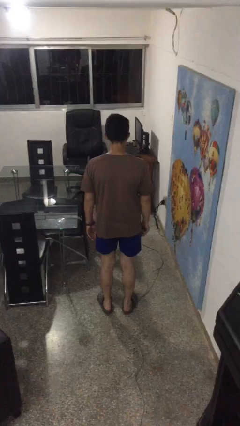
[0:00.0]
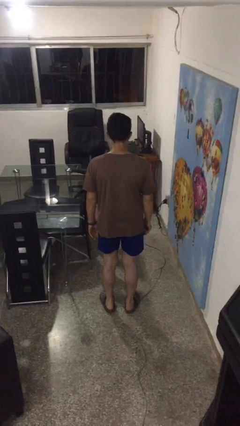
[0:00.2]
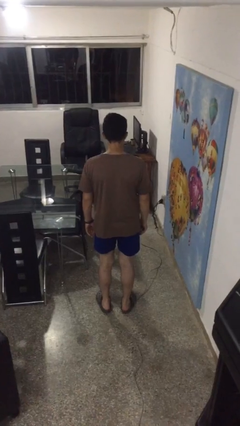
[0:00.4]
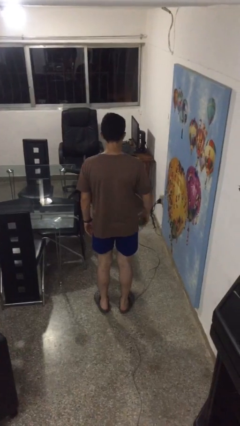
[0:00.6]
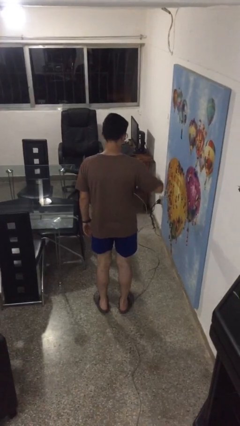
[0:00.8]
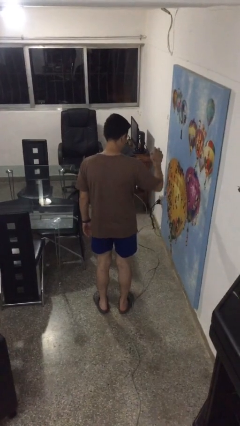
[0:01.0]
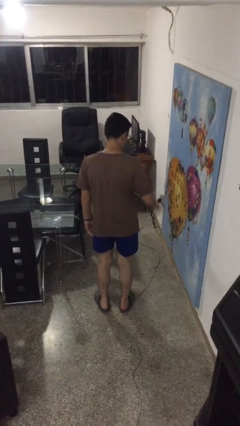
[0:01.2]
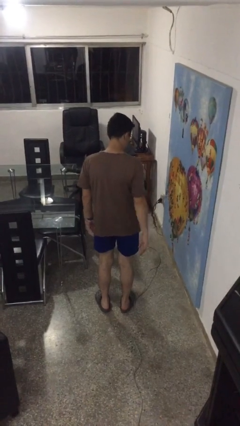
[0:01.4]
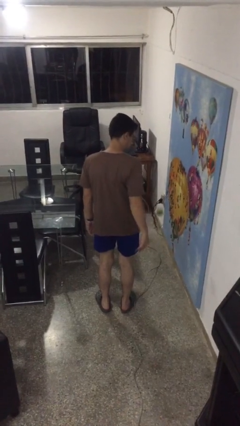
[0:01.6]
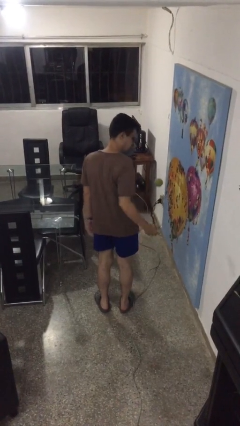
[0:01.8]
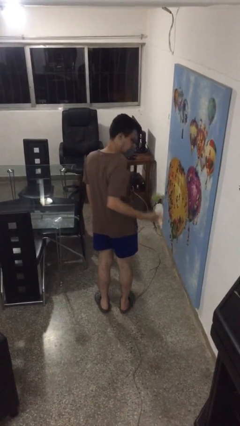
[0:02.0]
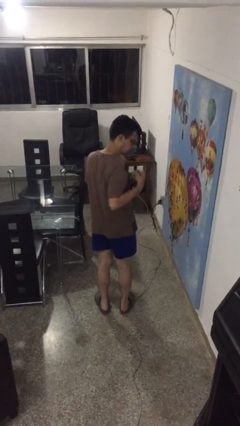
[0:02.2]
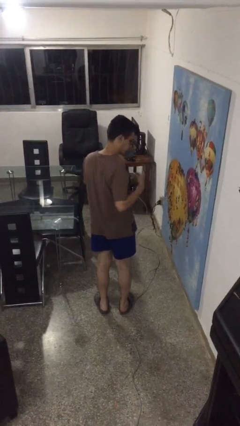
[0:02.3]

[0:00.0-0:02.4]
person bounces ball on floor

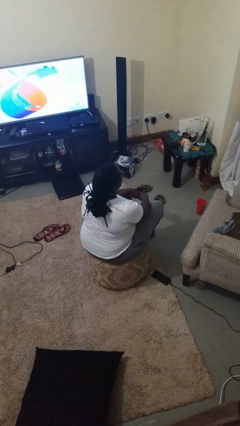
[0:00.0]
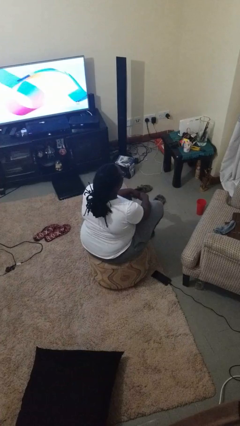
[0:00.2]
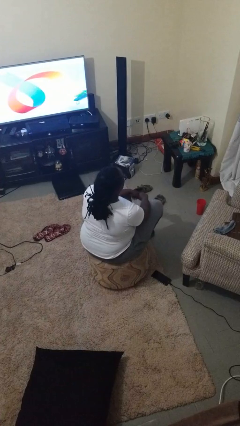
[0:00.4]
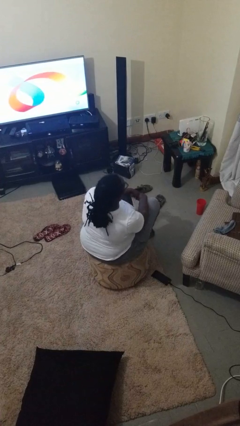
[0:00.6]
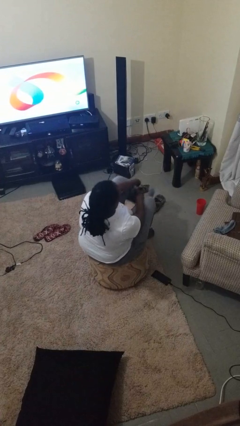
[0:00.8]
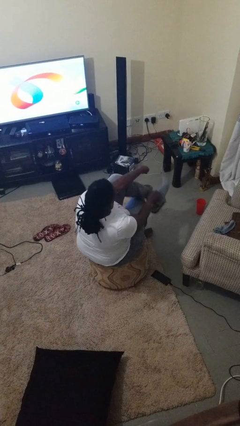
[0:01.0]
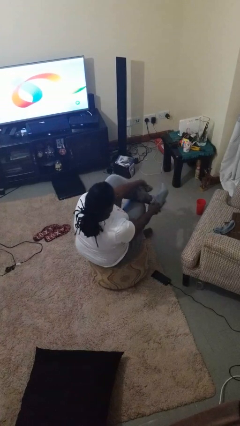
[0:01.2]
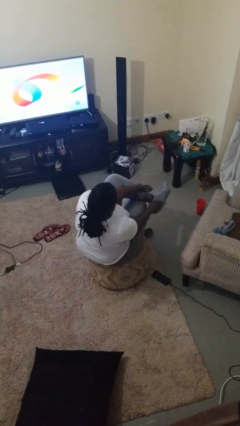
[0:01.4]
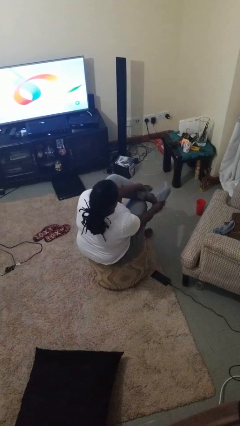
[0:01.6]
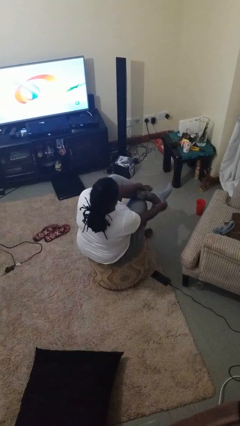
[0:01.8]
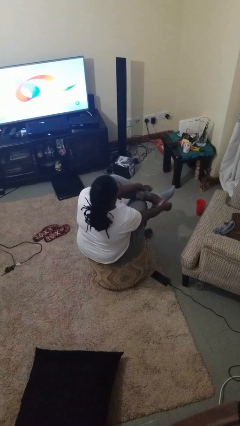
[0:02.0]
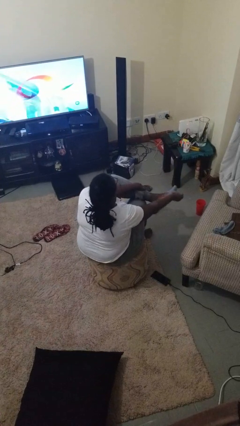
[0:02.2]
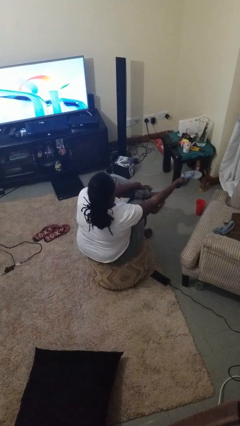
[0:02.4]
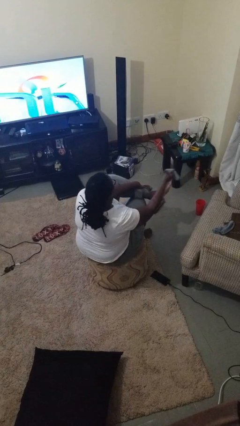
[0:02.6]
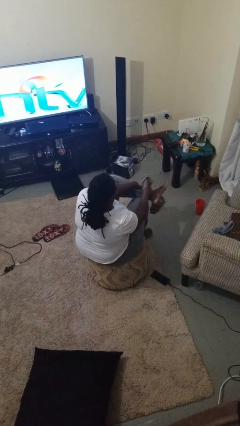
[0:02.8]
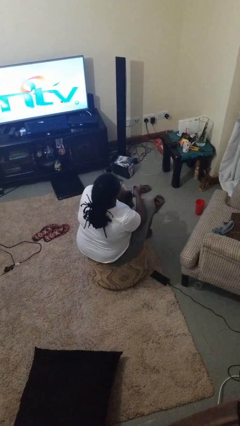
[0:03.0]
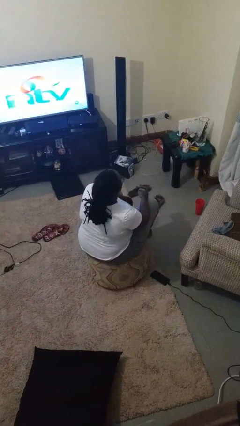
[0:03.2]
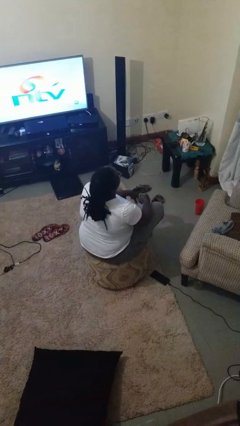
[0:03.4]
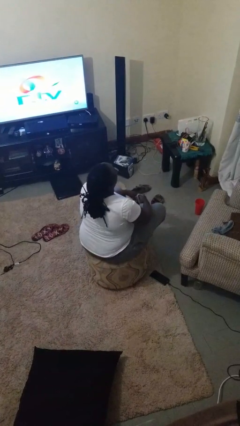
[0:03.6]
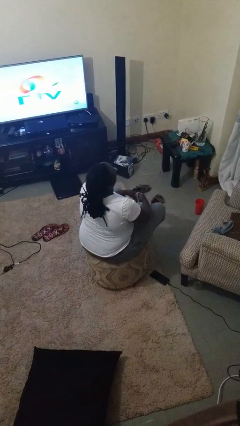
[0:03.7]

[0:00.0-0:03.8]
person takes off socks

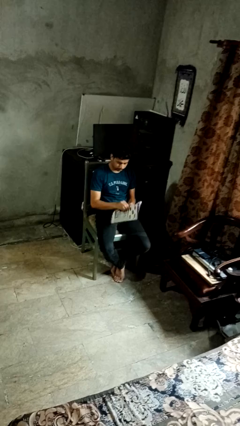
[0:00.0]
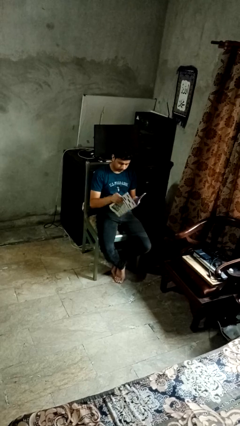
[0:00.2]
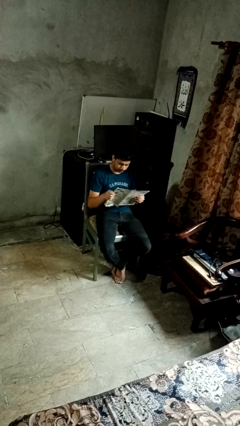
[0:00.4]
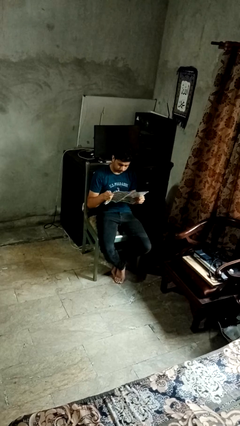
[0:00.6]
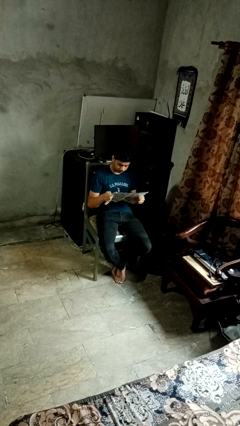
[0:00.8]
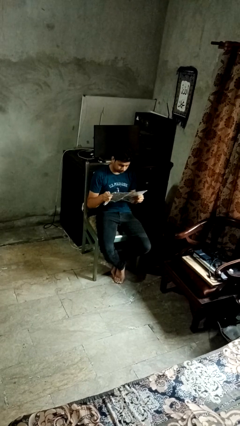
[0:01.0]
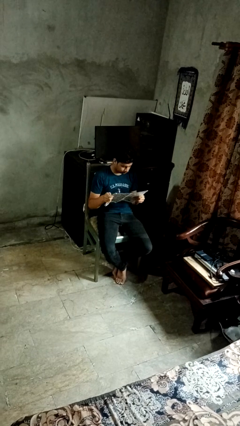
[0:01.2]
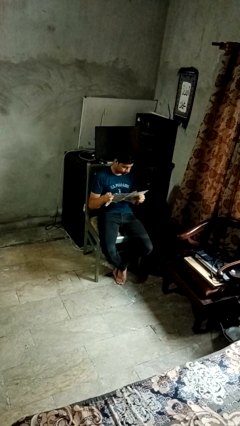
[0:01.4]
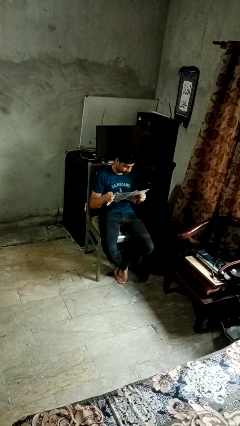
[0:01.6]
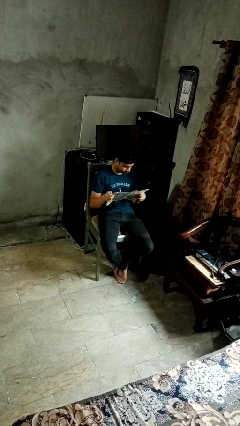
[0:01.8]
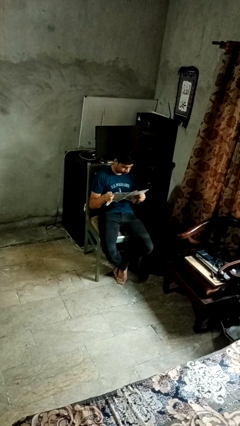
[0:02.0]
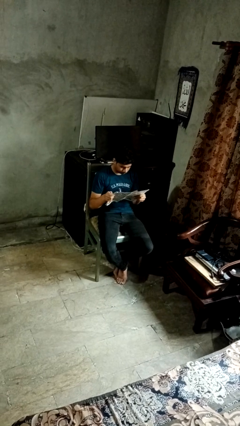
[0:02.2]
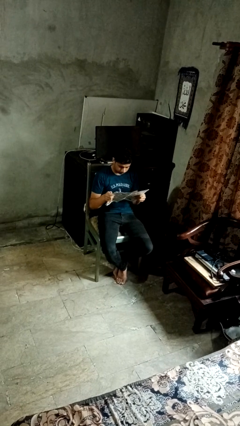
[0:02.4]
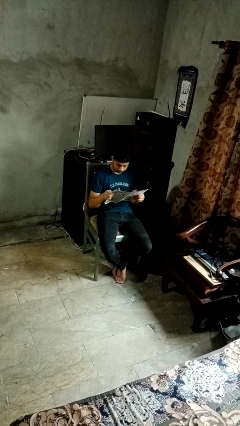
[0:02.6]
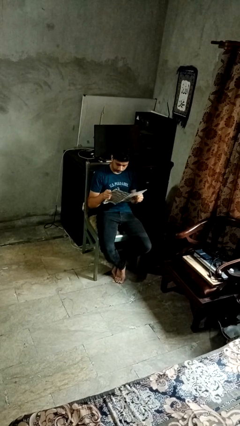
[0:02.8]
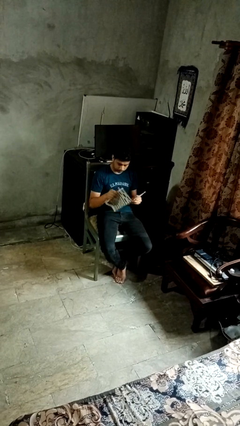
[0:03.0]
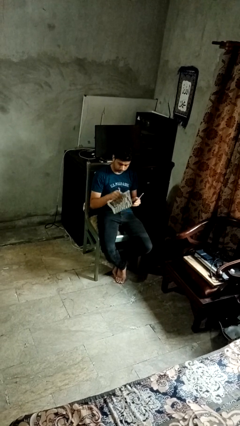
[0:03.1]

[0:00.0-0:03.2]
person reads magazine

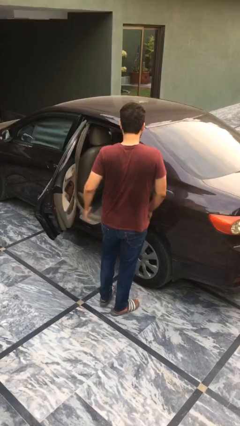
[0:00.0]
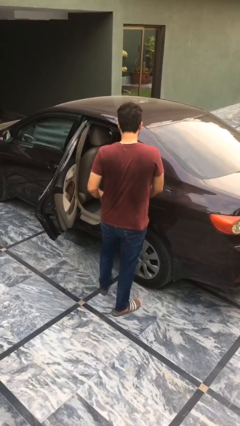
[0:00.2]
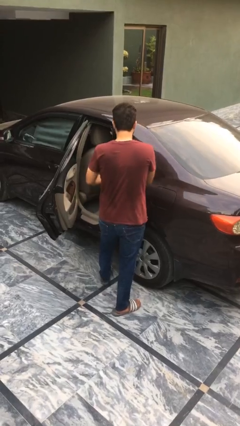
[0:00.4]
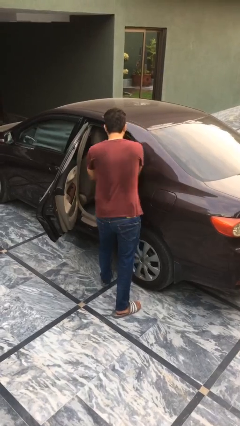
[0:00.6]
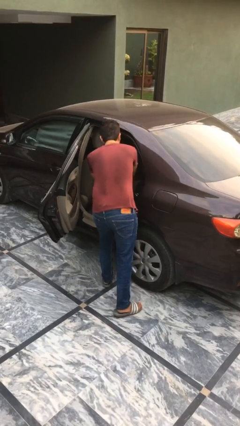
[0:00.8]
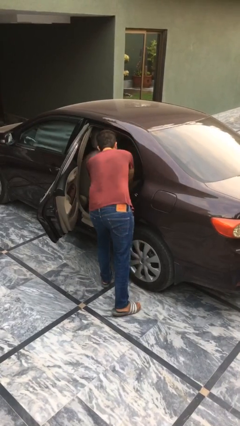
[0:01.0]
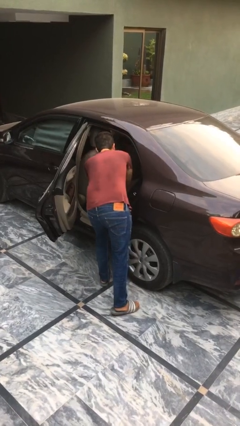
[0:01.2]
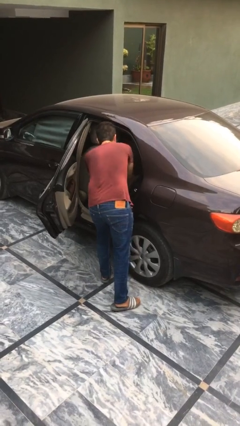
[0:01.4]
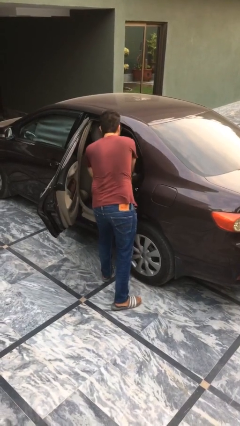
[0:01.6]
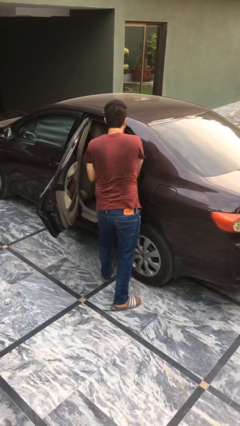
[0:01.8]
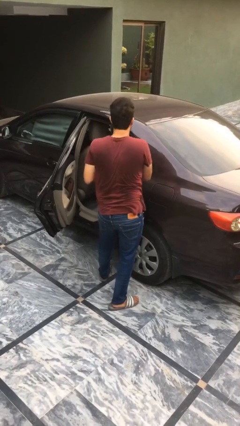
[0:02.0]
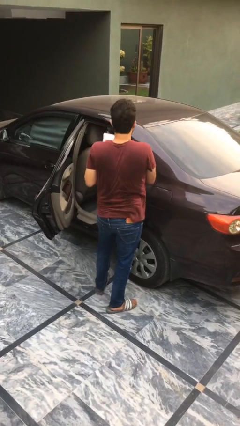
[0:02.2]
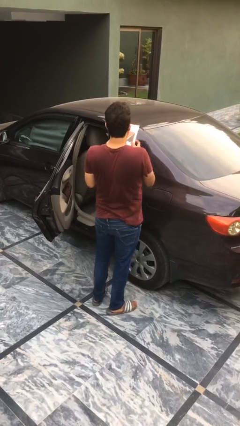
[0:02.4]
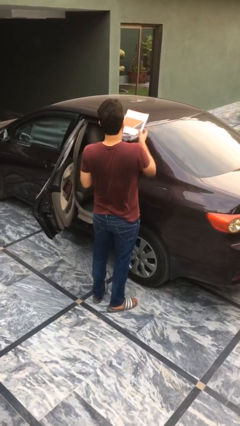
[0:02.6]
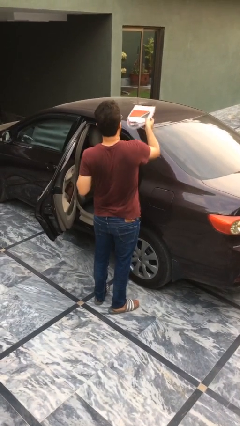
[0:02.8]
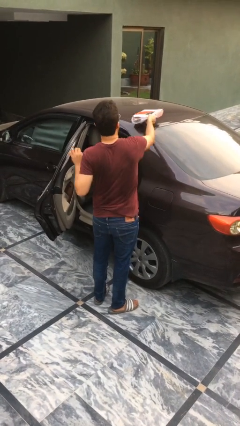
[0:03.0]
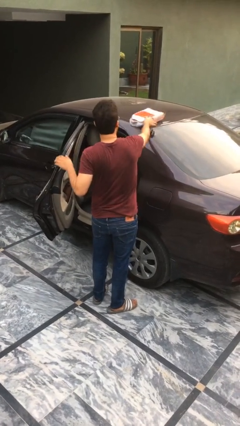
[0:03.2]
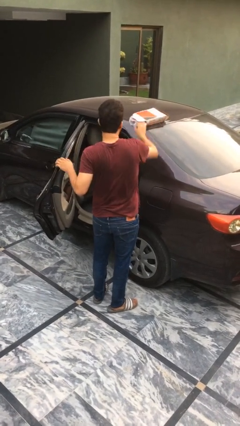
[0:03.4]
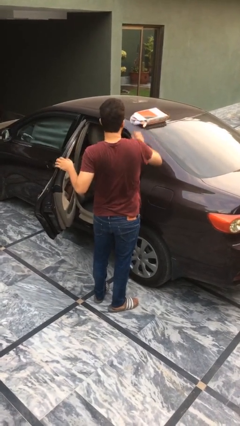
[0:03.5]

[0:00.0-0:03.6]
person unloads car

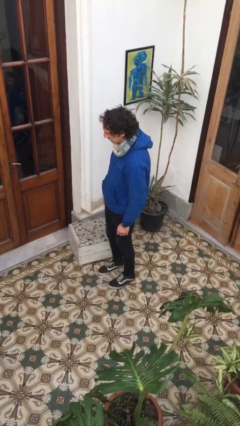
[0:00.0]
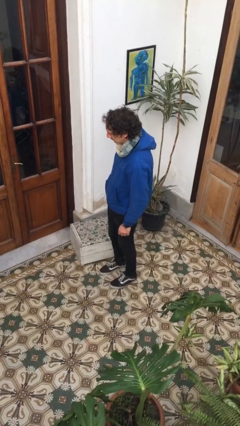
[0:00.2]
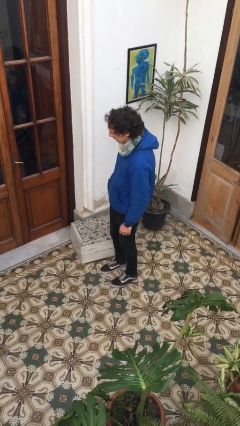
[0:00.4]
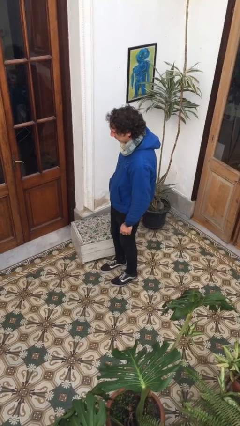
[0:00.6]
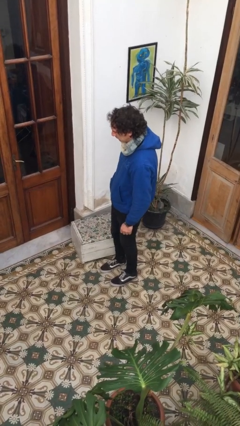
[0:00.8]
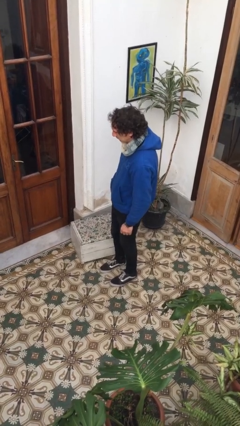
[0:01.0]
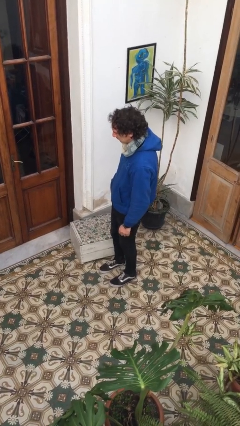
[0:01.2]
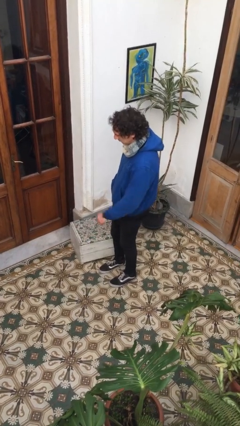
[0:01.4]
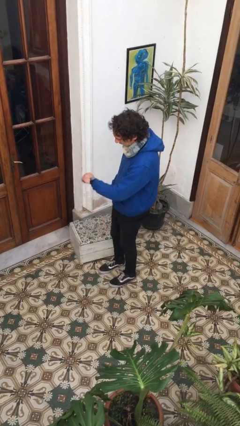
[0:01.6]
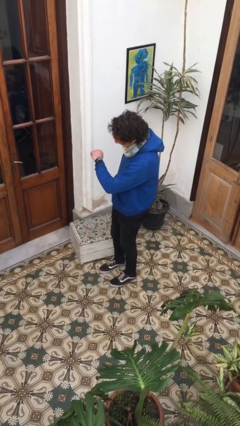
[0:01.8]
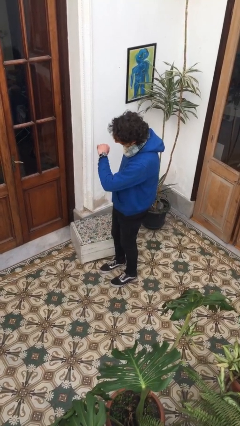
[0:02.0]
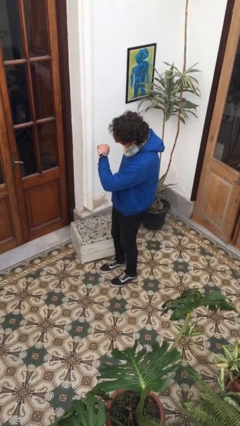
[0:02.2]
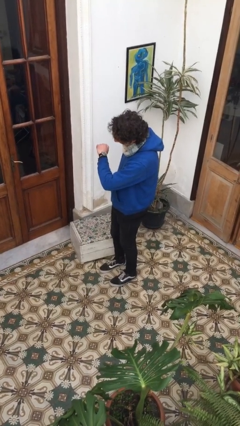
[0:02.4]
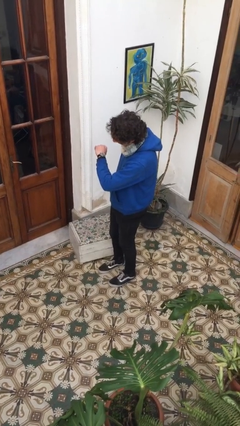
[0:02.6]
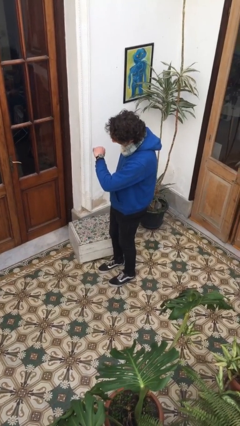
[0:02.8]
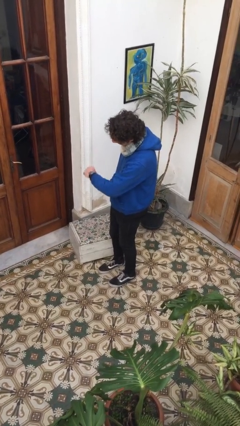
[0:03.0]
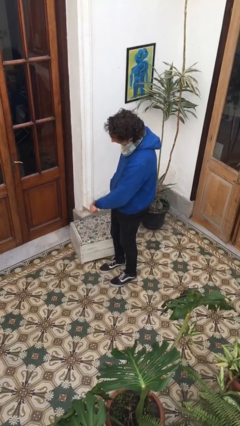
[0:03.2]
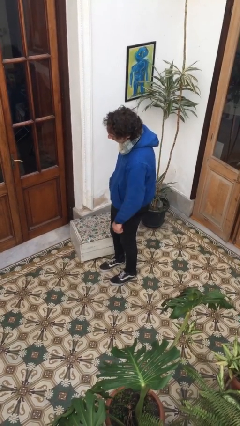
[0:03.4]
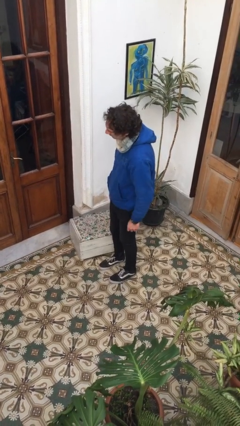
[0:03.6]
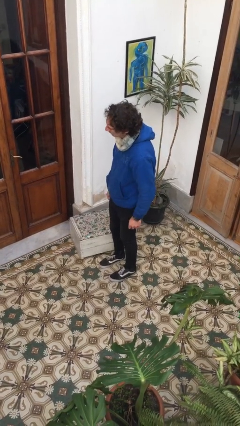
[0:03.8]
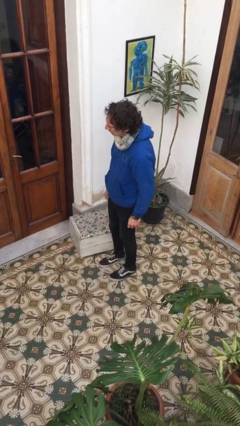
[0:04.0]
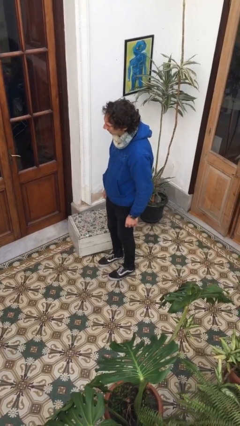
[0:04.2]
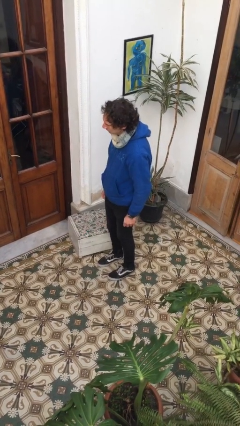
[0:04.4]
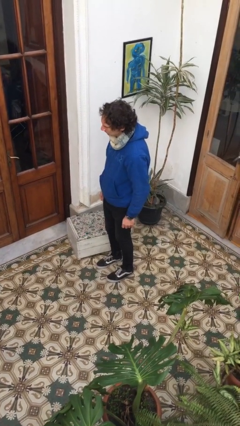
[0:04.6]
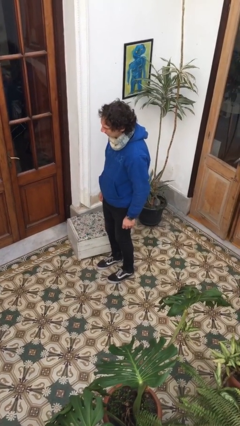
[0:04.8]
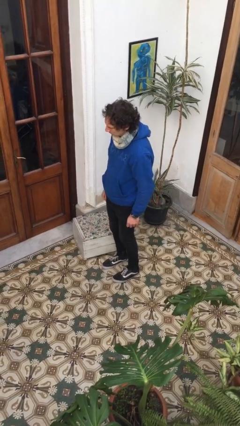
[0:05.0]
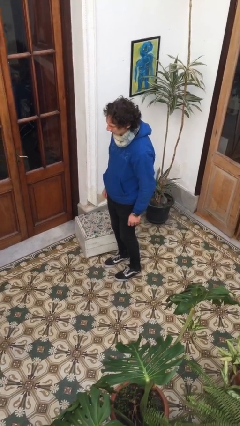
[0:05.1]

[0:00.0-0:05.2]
person looks at wristwatch
